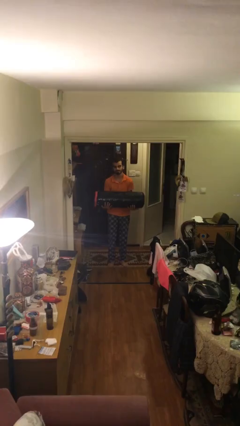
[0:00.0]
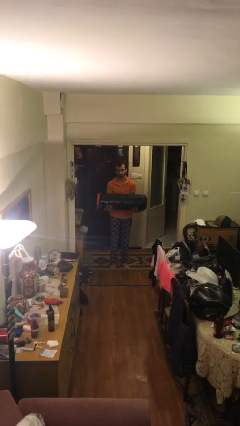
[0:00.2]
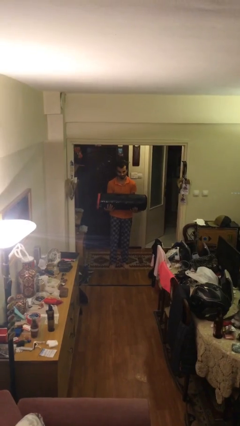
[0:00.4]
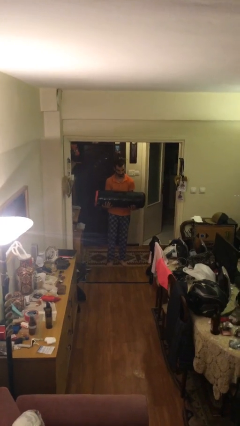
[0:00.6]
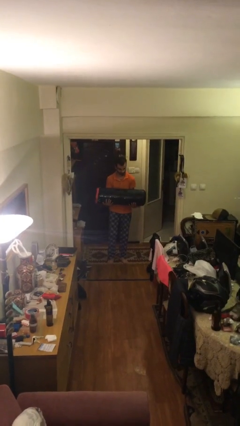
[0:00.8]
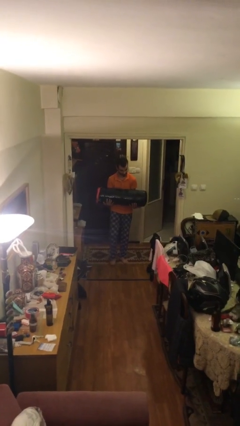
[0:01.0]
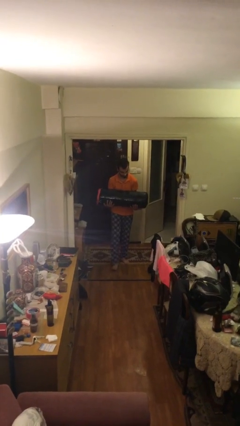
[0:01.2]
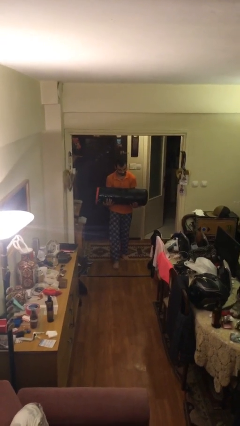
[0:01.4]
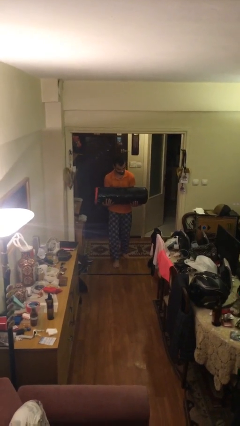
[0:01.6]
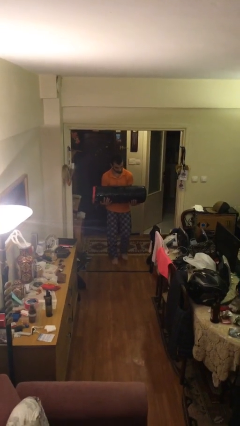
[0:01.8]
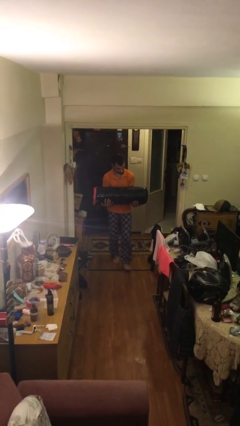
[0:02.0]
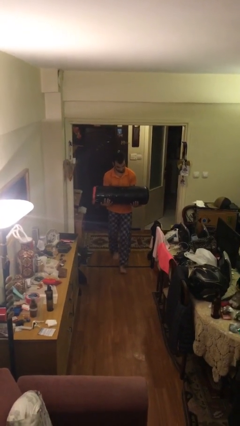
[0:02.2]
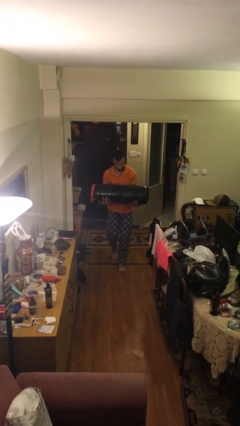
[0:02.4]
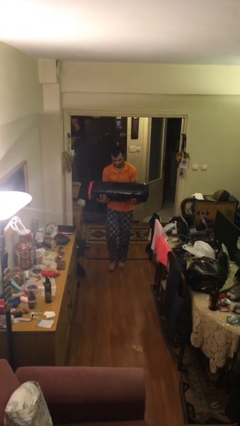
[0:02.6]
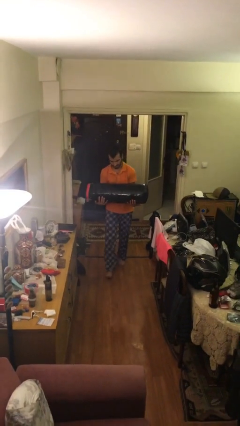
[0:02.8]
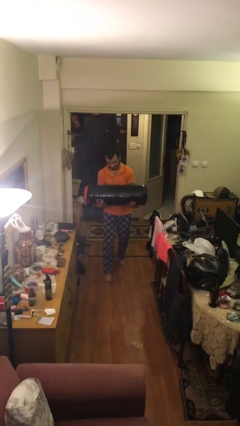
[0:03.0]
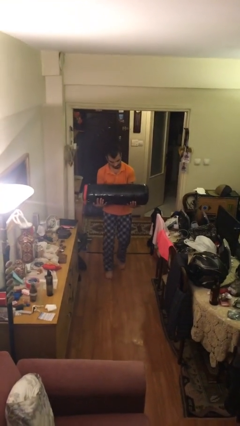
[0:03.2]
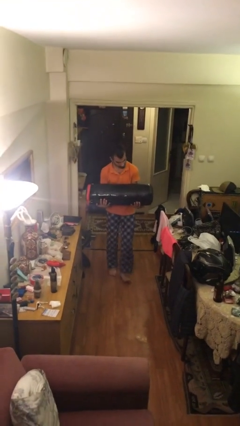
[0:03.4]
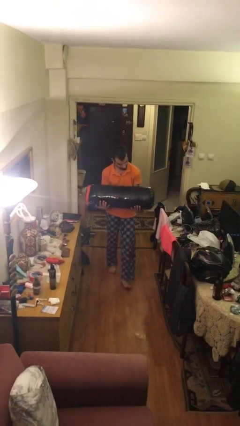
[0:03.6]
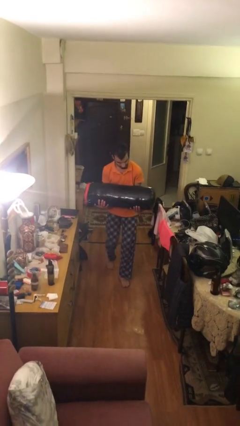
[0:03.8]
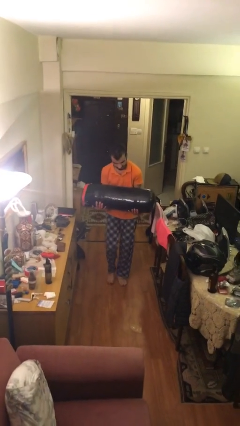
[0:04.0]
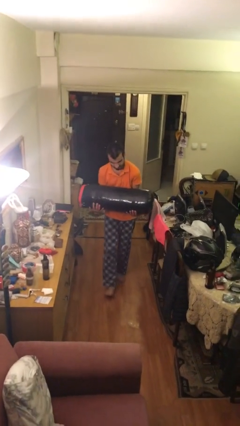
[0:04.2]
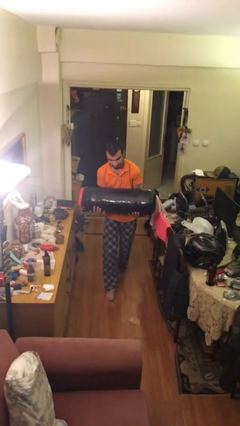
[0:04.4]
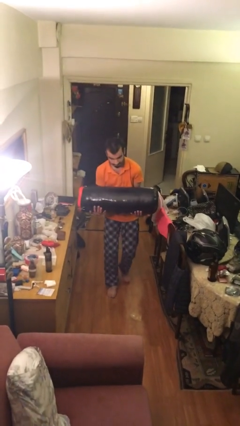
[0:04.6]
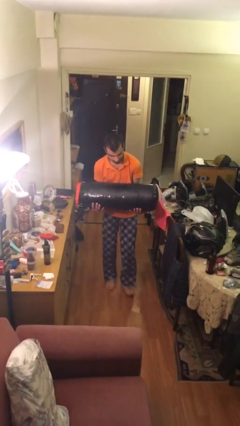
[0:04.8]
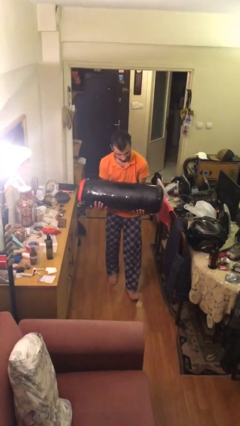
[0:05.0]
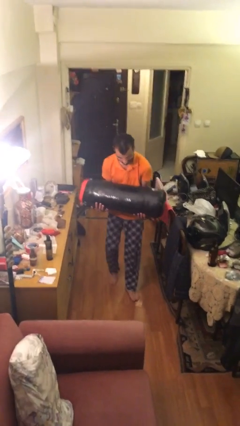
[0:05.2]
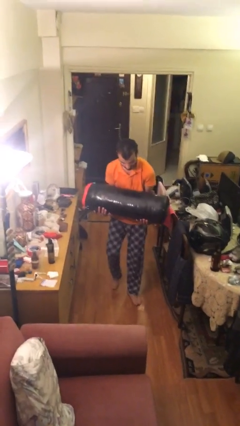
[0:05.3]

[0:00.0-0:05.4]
person carries heavy object

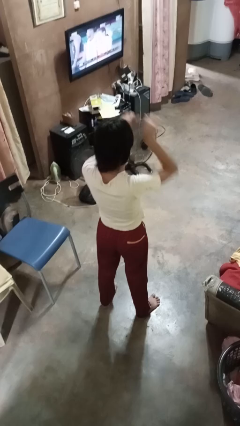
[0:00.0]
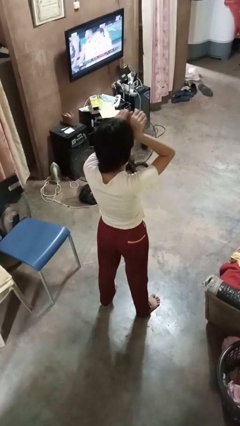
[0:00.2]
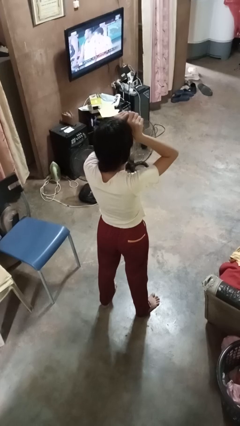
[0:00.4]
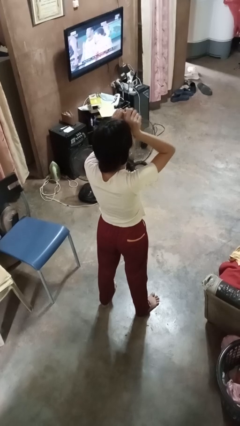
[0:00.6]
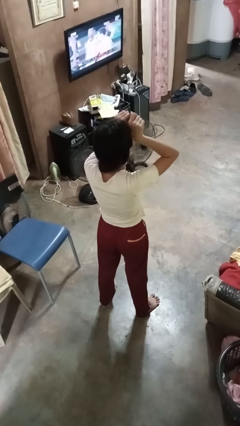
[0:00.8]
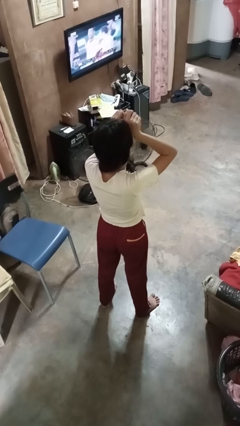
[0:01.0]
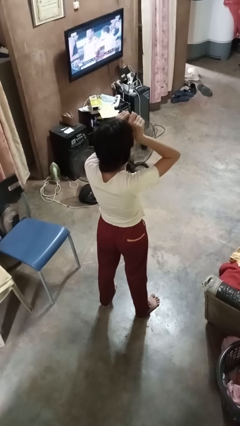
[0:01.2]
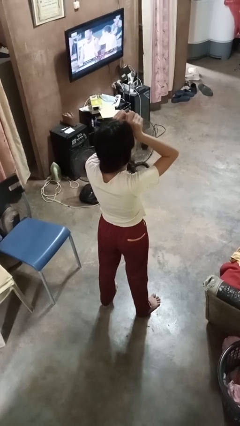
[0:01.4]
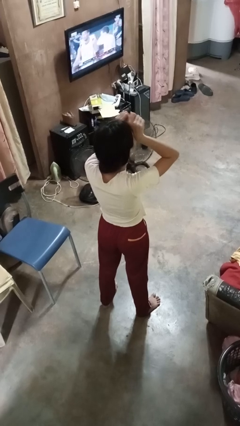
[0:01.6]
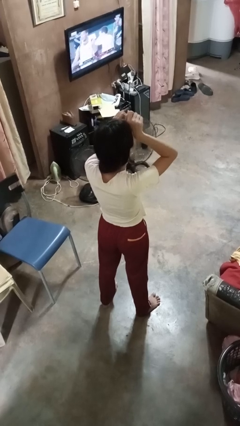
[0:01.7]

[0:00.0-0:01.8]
person rubs eyes

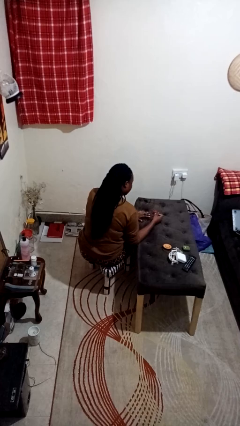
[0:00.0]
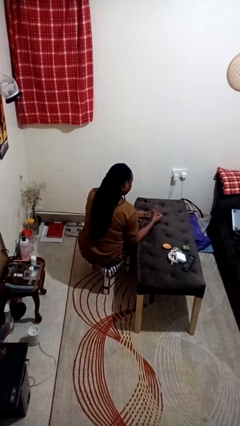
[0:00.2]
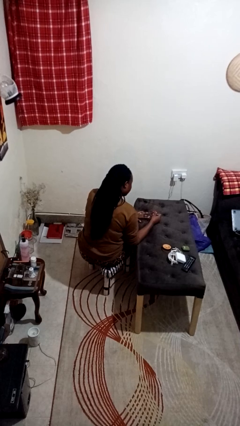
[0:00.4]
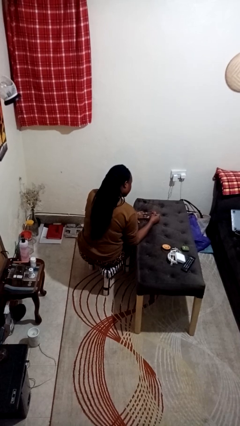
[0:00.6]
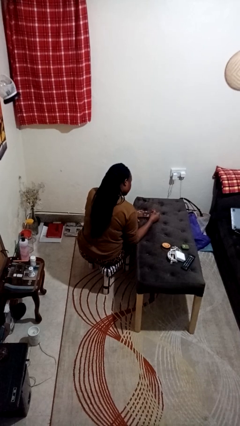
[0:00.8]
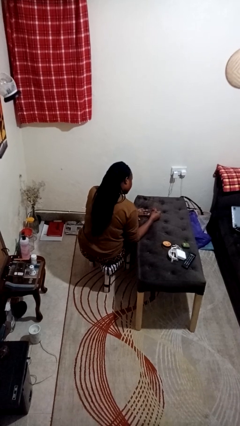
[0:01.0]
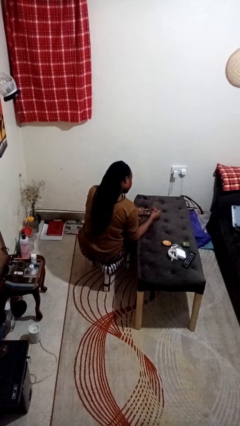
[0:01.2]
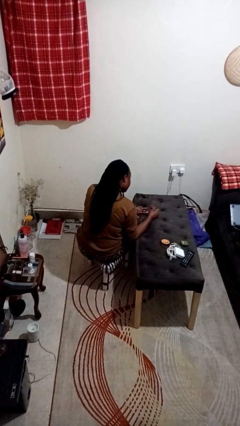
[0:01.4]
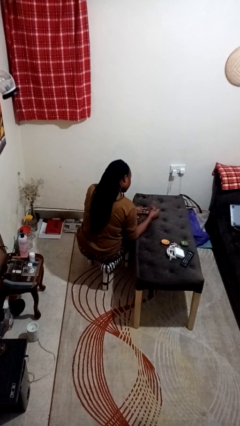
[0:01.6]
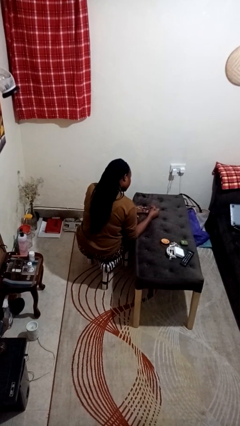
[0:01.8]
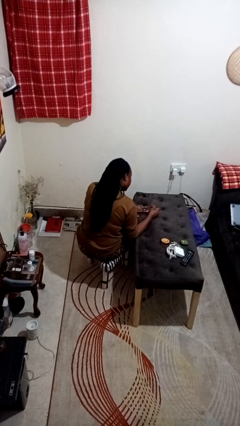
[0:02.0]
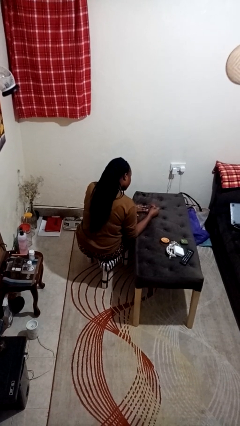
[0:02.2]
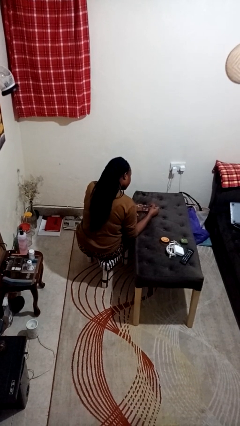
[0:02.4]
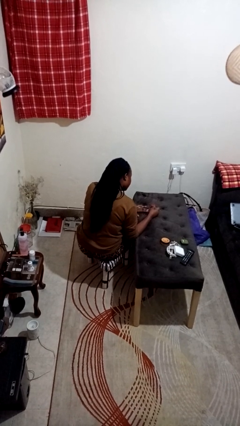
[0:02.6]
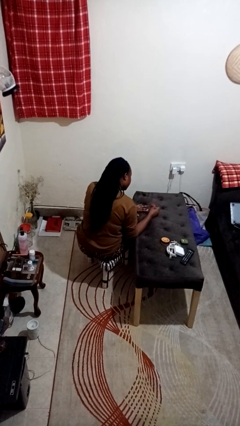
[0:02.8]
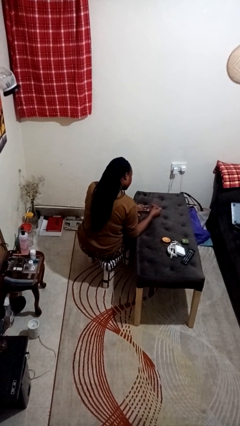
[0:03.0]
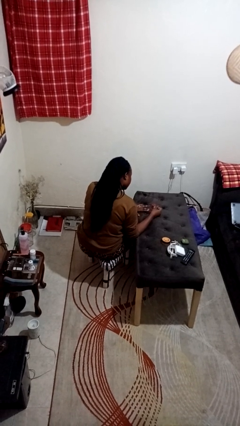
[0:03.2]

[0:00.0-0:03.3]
person paints fingernails

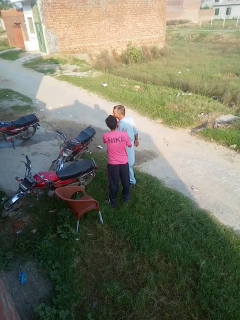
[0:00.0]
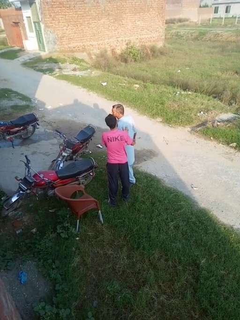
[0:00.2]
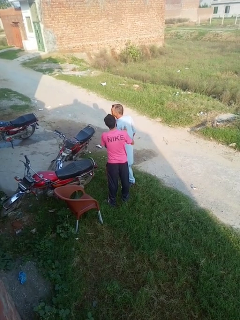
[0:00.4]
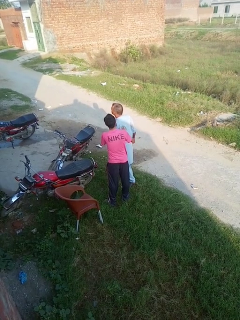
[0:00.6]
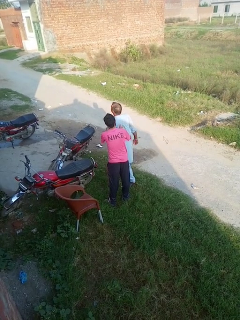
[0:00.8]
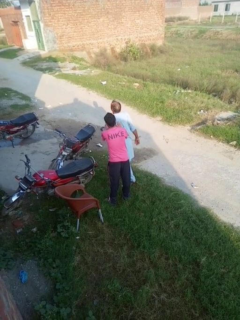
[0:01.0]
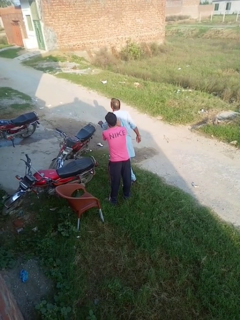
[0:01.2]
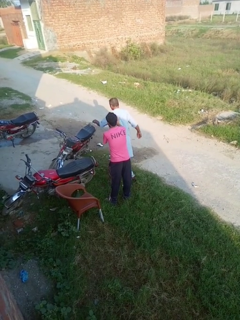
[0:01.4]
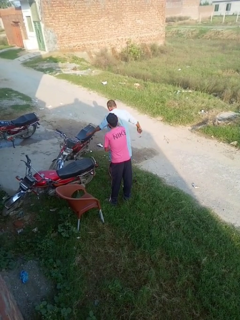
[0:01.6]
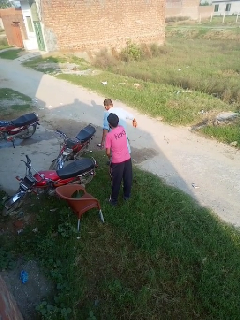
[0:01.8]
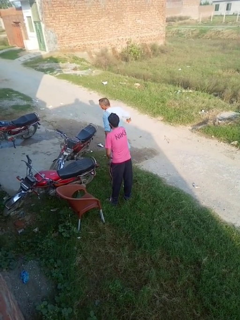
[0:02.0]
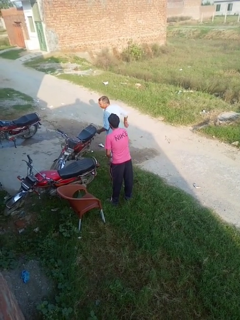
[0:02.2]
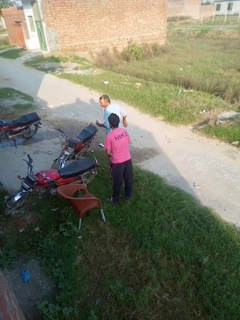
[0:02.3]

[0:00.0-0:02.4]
person spins person around

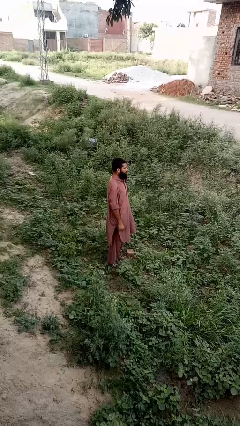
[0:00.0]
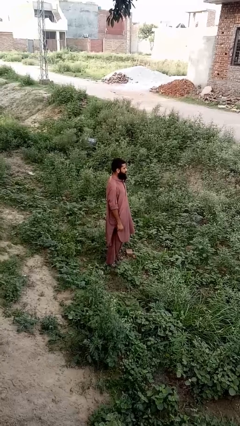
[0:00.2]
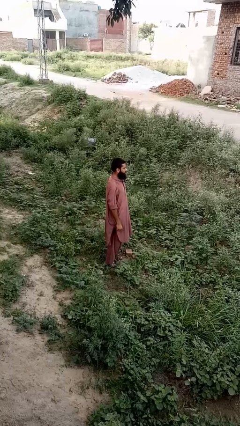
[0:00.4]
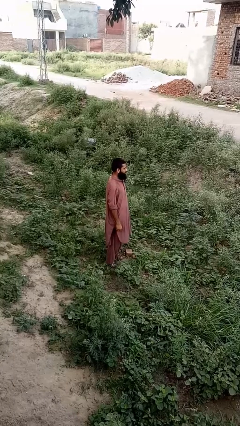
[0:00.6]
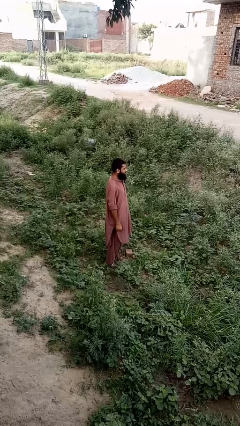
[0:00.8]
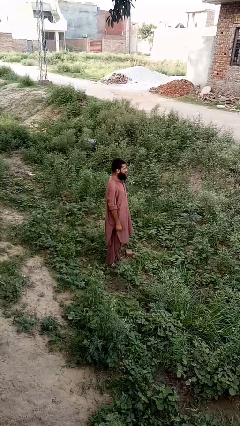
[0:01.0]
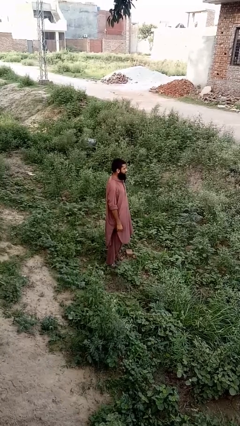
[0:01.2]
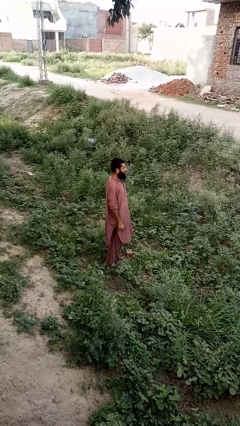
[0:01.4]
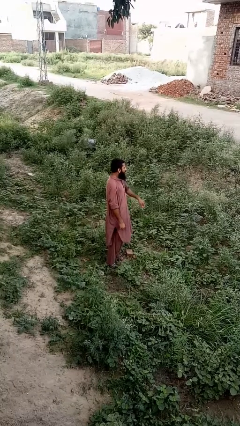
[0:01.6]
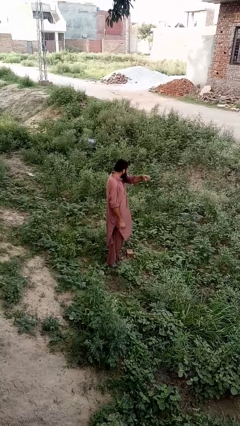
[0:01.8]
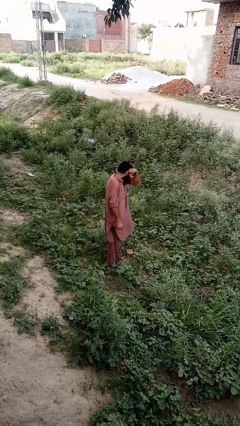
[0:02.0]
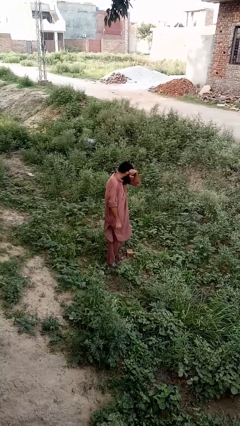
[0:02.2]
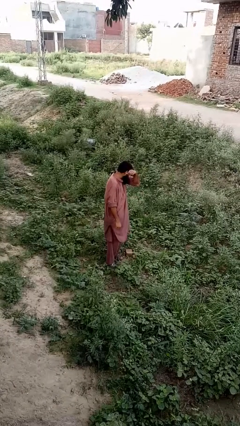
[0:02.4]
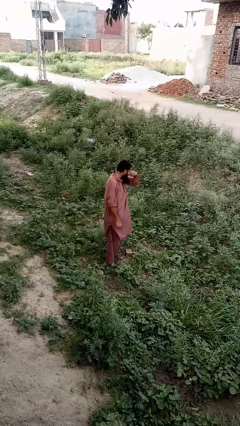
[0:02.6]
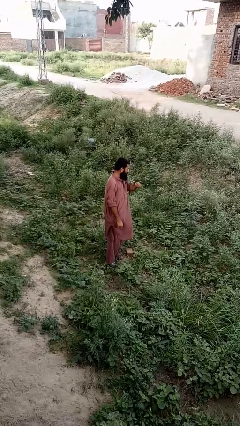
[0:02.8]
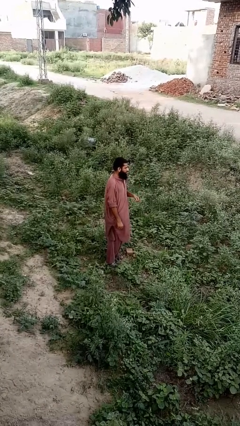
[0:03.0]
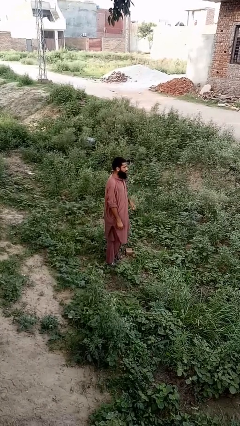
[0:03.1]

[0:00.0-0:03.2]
person sneezes into arm

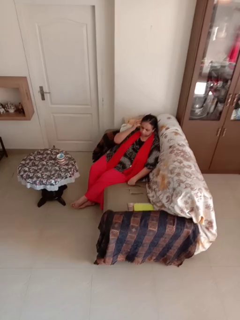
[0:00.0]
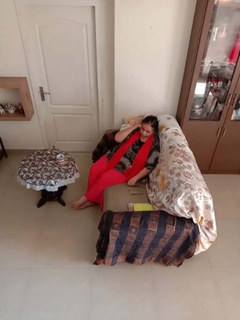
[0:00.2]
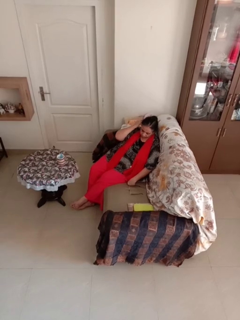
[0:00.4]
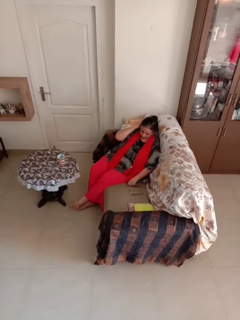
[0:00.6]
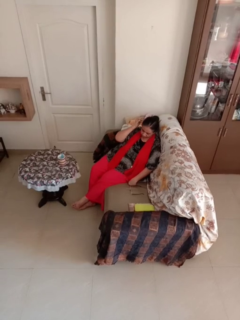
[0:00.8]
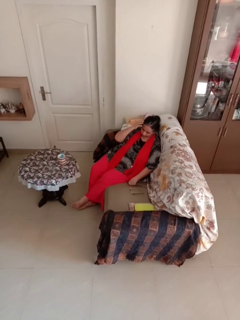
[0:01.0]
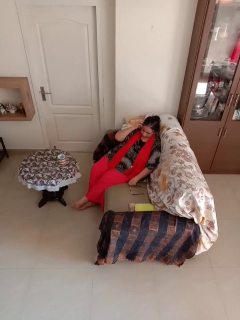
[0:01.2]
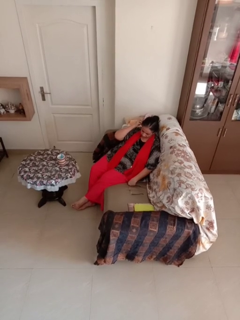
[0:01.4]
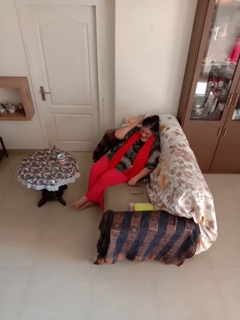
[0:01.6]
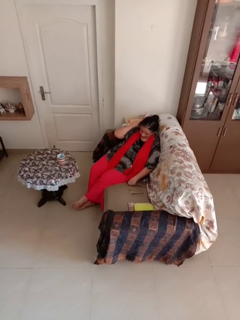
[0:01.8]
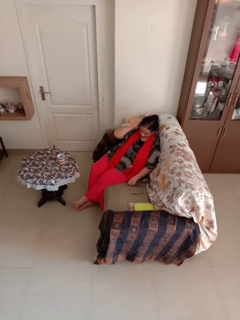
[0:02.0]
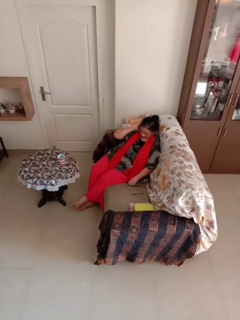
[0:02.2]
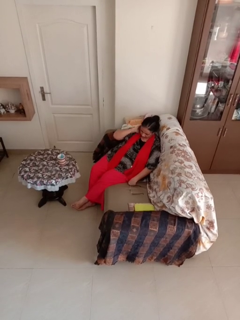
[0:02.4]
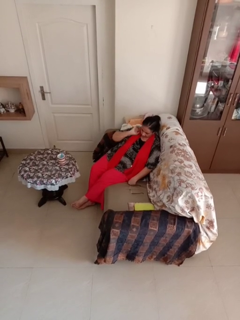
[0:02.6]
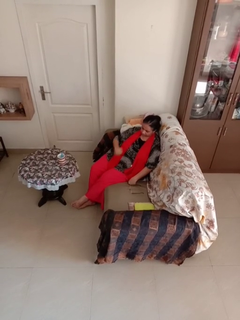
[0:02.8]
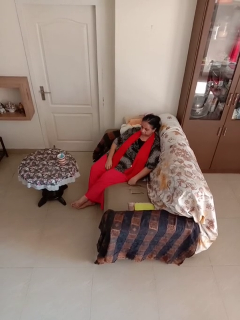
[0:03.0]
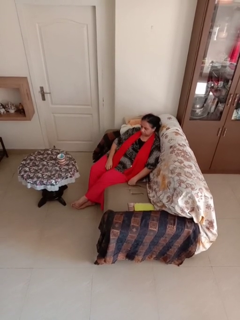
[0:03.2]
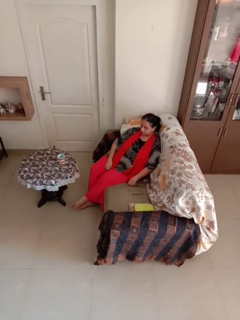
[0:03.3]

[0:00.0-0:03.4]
person strokes hair
